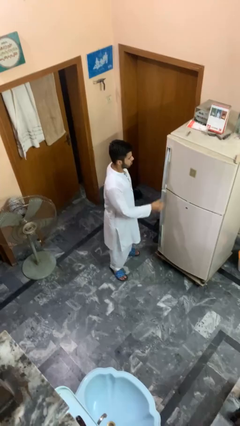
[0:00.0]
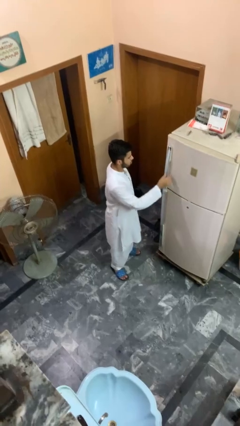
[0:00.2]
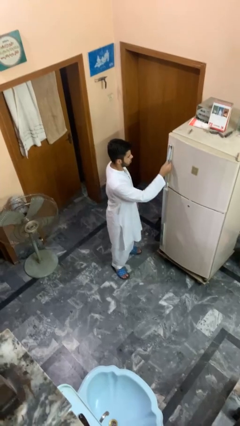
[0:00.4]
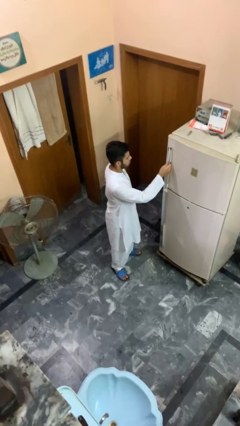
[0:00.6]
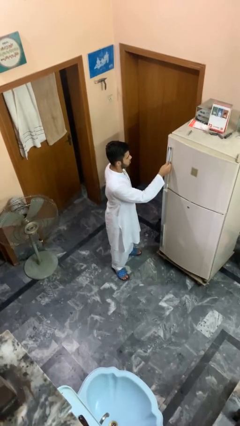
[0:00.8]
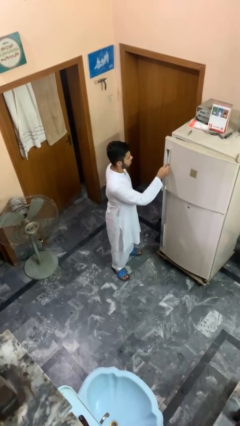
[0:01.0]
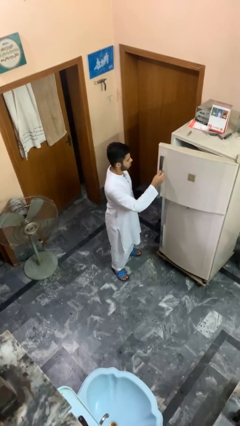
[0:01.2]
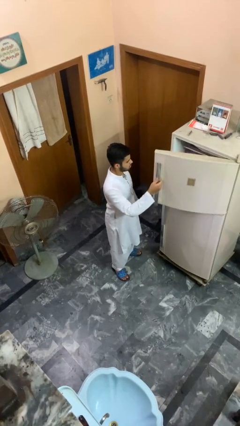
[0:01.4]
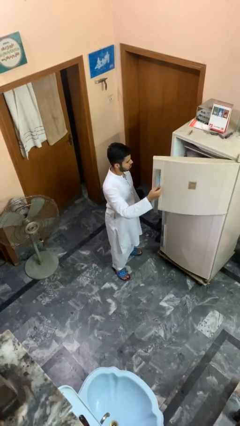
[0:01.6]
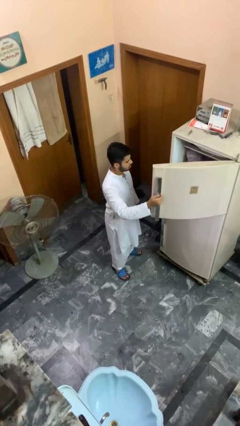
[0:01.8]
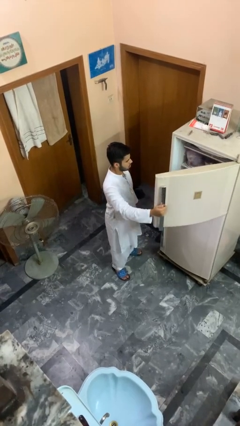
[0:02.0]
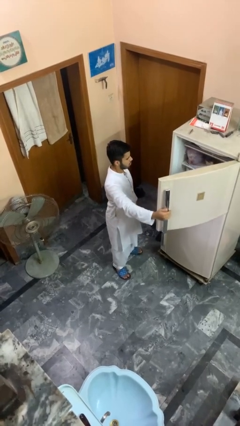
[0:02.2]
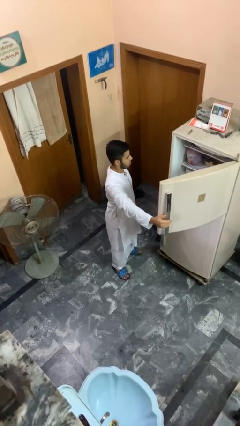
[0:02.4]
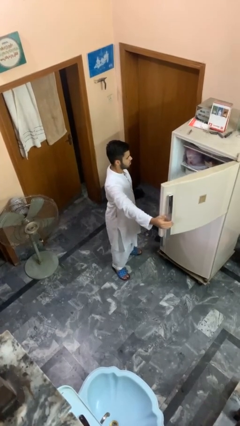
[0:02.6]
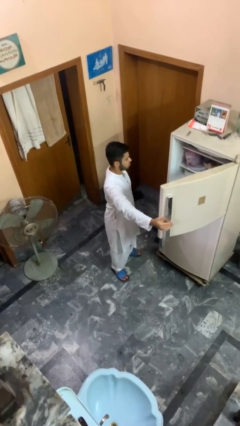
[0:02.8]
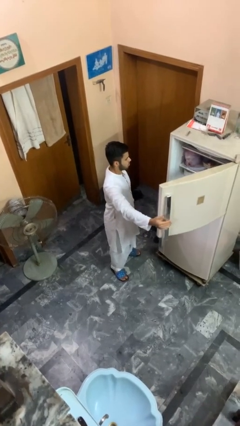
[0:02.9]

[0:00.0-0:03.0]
person opens refrigerator

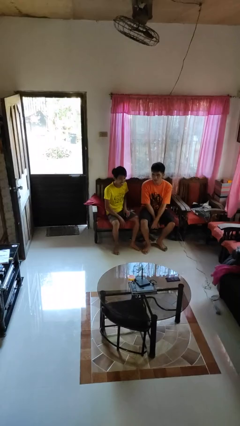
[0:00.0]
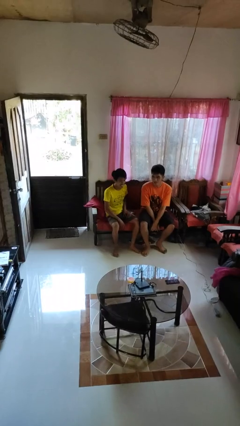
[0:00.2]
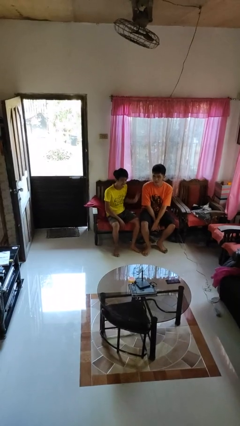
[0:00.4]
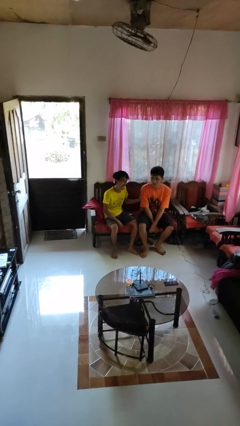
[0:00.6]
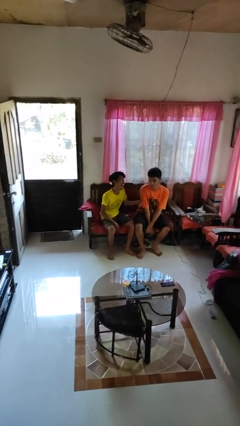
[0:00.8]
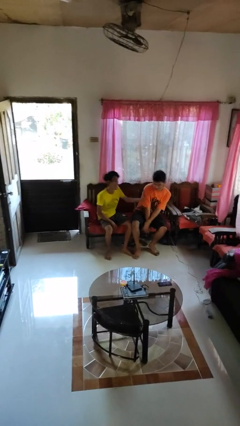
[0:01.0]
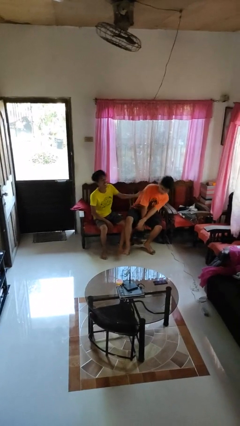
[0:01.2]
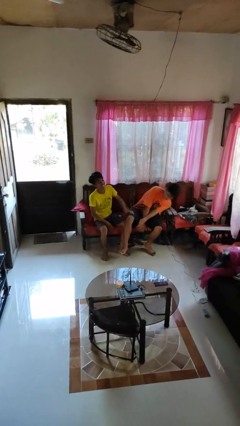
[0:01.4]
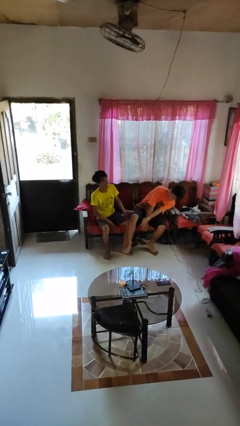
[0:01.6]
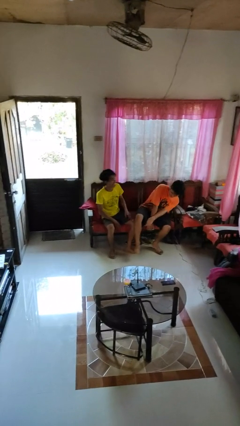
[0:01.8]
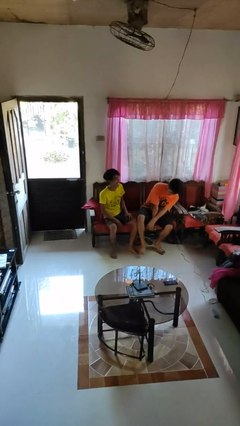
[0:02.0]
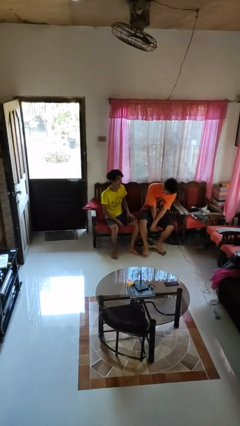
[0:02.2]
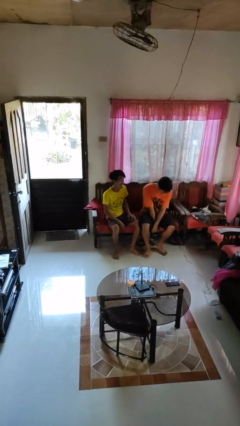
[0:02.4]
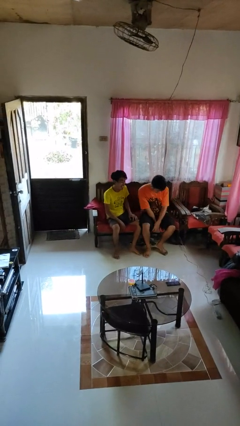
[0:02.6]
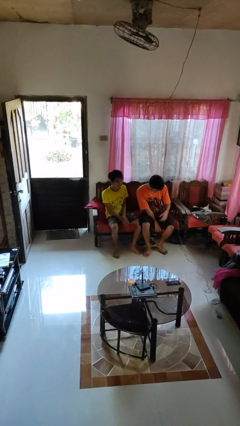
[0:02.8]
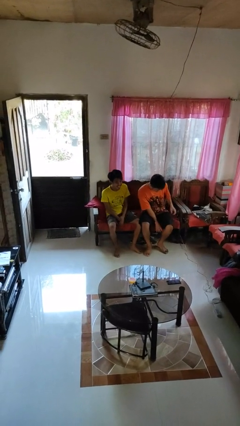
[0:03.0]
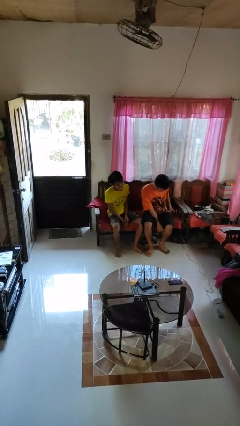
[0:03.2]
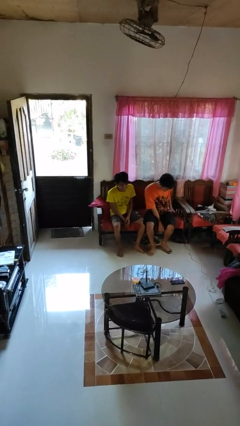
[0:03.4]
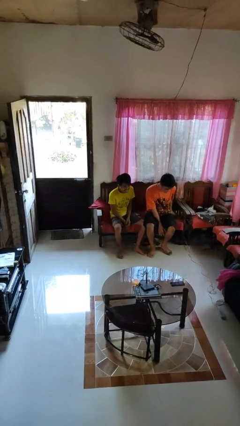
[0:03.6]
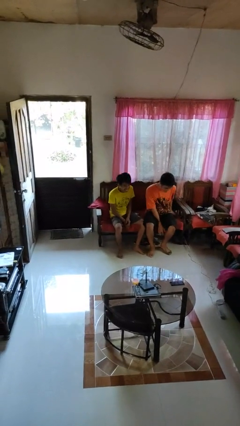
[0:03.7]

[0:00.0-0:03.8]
person shoves person

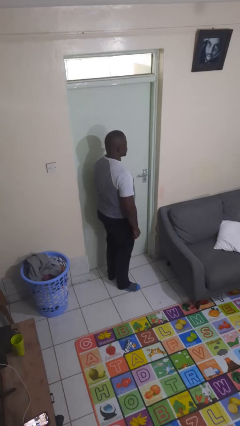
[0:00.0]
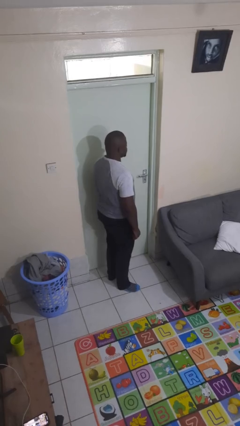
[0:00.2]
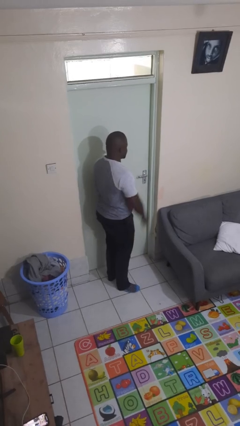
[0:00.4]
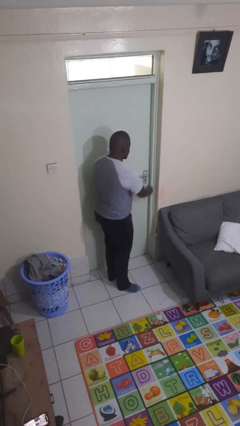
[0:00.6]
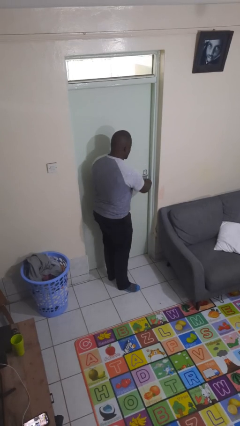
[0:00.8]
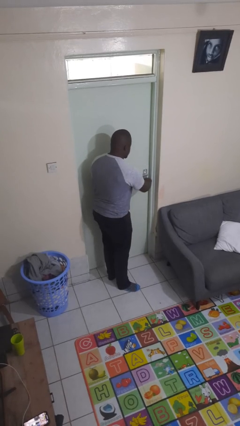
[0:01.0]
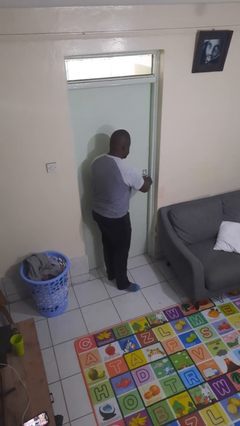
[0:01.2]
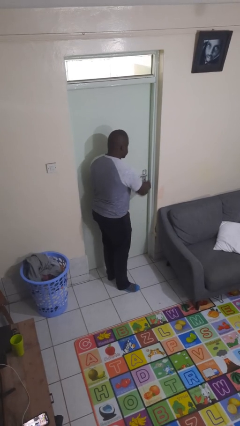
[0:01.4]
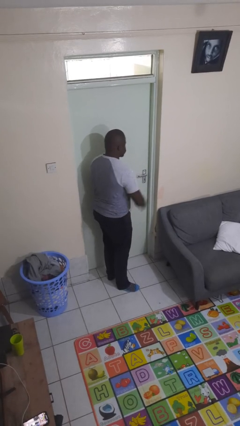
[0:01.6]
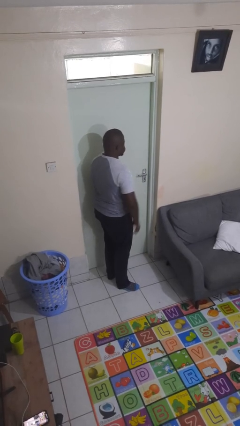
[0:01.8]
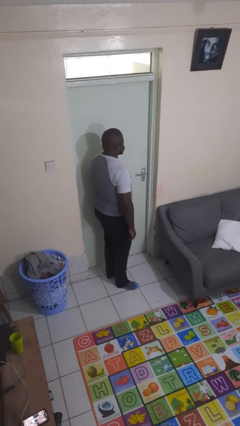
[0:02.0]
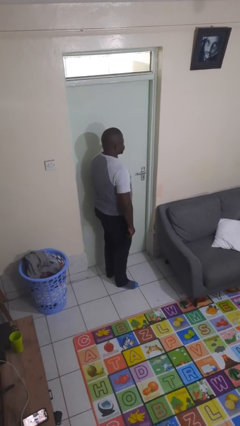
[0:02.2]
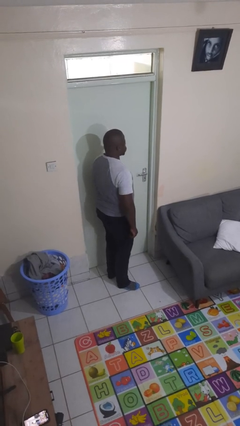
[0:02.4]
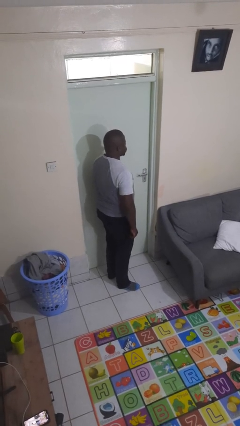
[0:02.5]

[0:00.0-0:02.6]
person unlocks door with keys

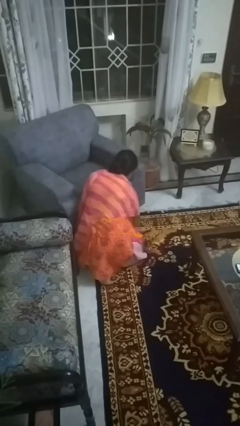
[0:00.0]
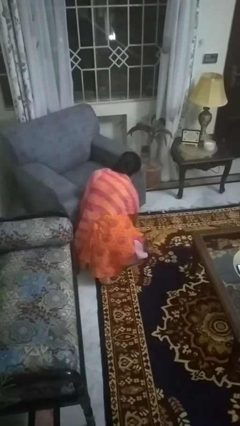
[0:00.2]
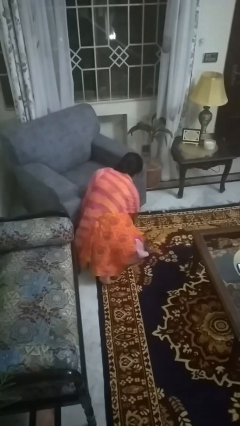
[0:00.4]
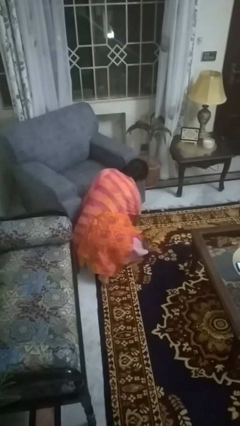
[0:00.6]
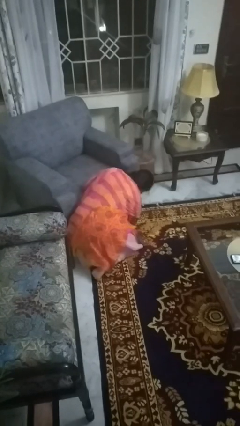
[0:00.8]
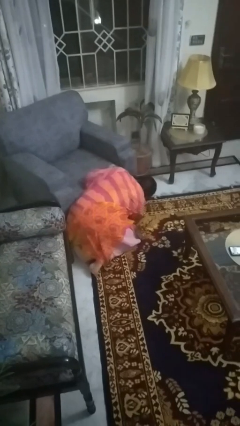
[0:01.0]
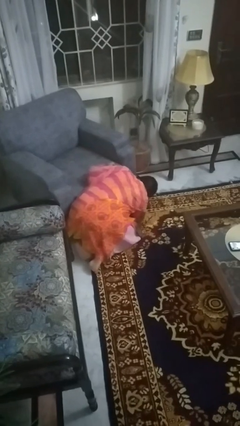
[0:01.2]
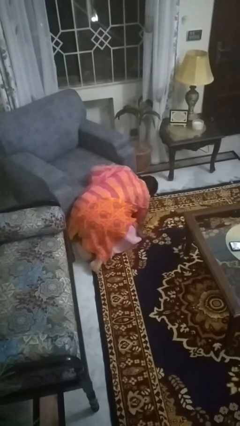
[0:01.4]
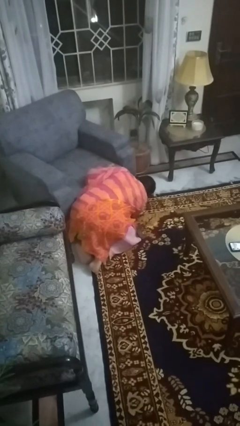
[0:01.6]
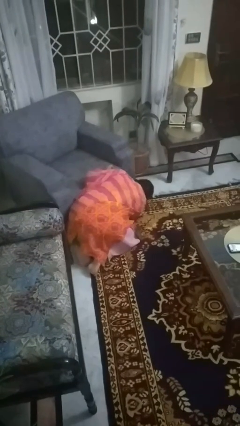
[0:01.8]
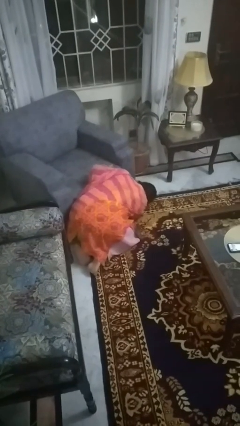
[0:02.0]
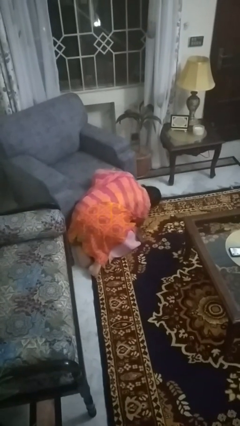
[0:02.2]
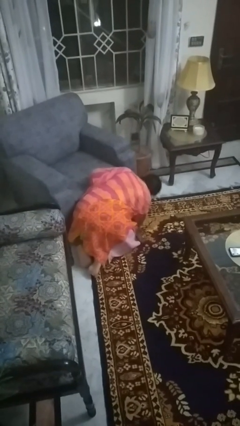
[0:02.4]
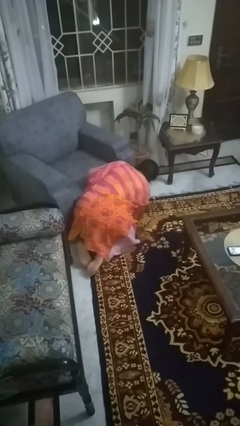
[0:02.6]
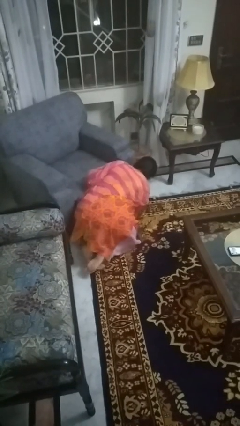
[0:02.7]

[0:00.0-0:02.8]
person searches under couch

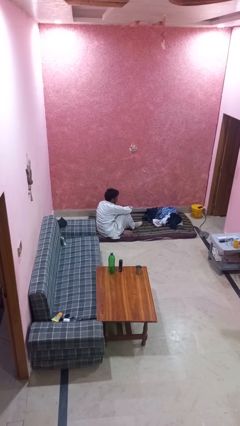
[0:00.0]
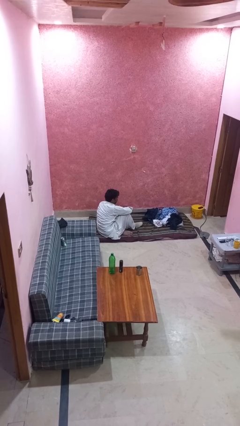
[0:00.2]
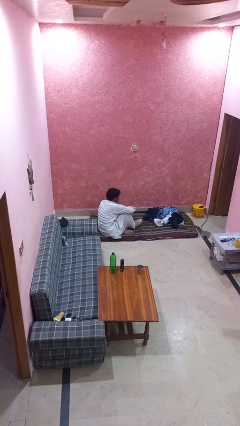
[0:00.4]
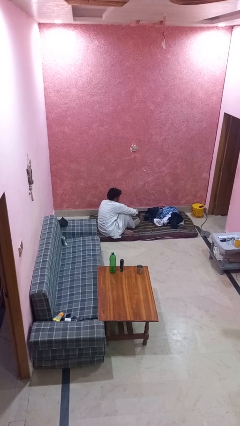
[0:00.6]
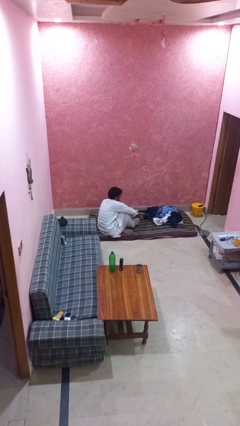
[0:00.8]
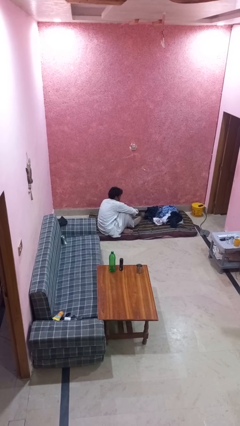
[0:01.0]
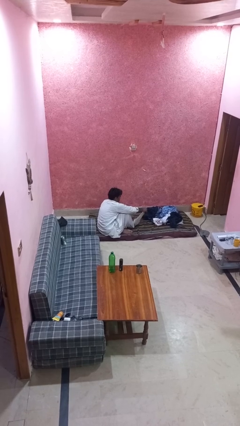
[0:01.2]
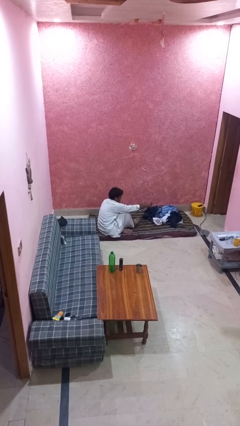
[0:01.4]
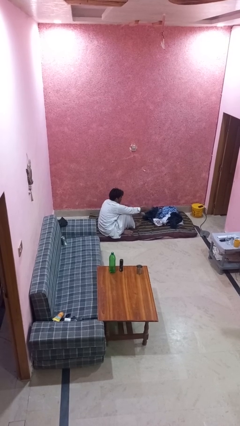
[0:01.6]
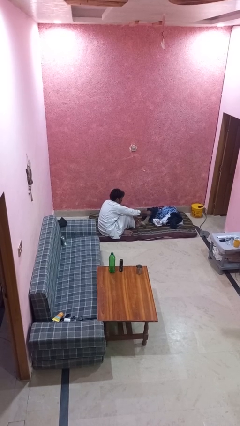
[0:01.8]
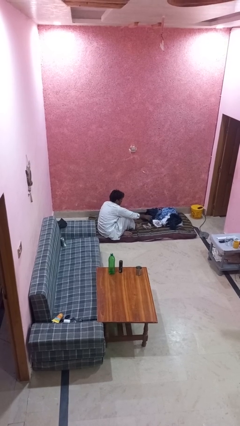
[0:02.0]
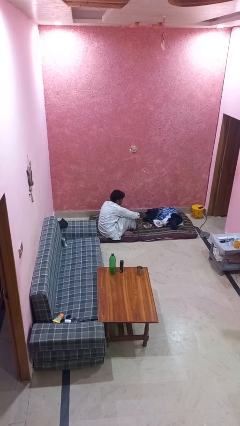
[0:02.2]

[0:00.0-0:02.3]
person takes off socks

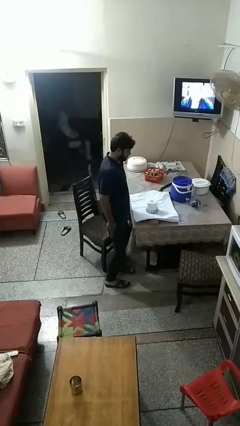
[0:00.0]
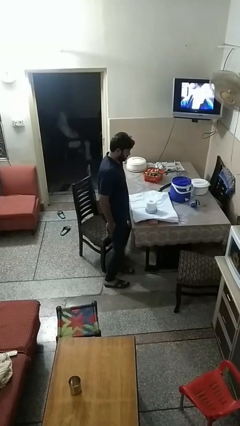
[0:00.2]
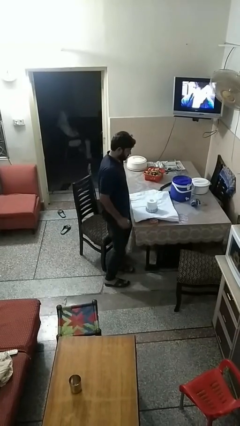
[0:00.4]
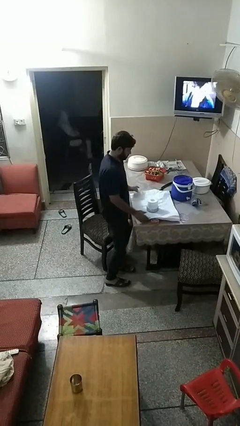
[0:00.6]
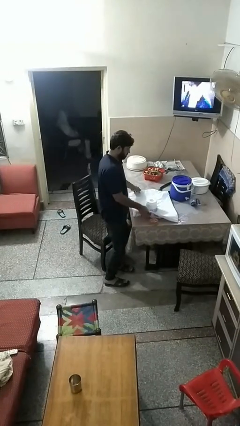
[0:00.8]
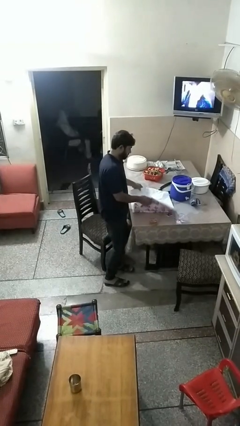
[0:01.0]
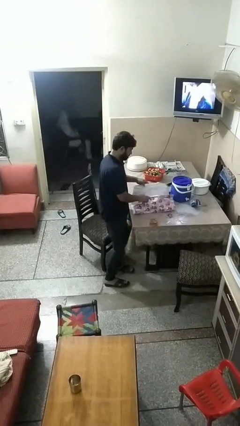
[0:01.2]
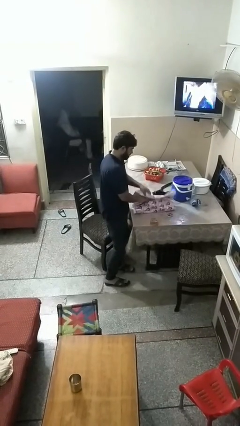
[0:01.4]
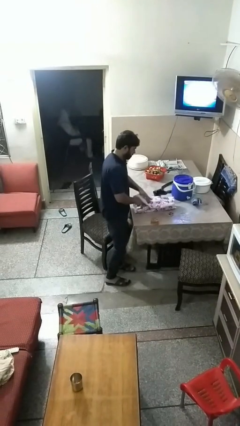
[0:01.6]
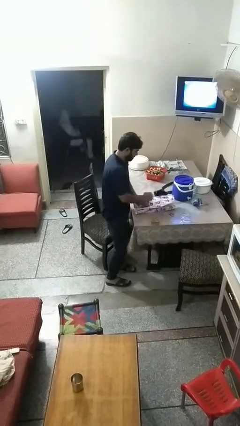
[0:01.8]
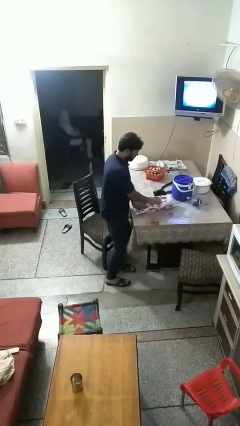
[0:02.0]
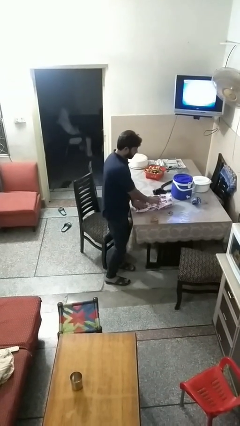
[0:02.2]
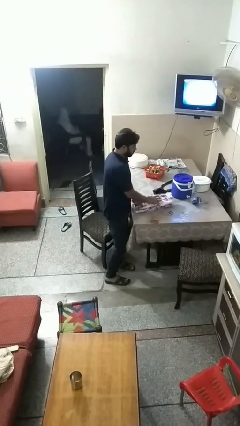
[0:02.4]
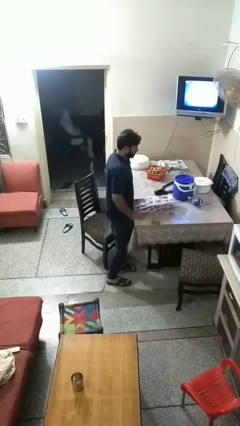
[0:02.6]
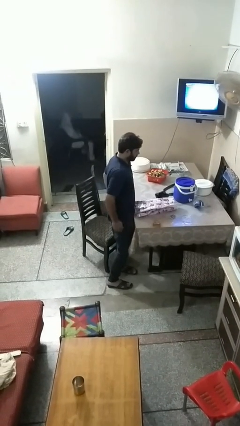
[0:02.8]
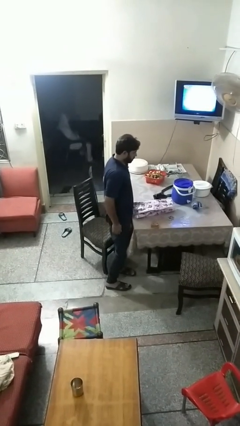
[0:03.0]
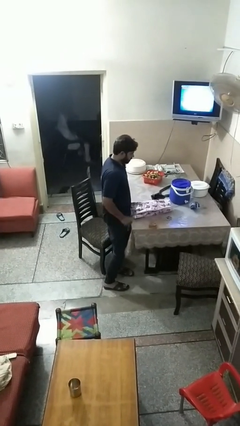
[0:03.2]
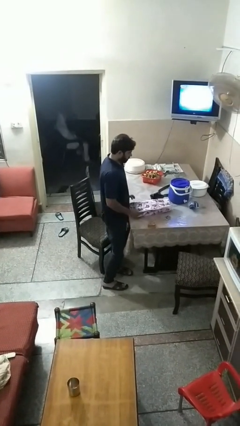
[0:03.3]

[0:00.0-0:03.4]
person wraps box
